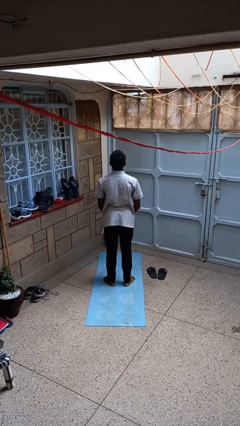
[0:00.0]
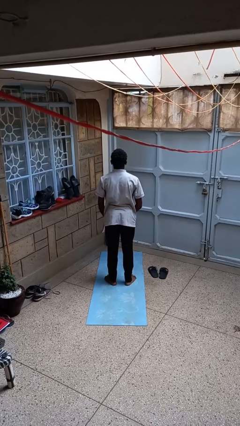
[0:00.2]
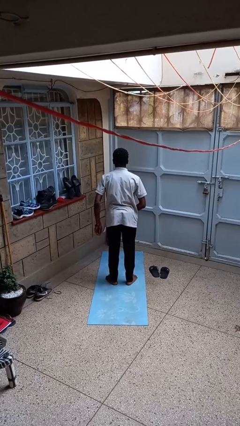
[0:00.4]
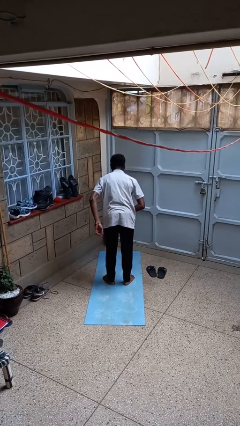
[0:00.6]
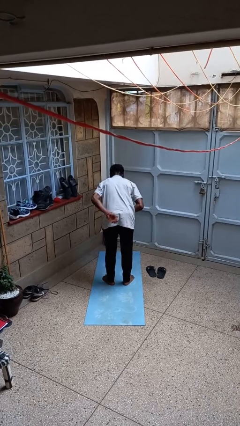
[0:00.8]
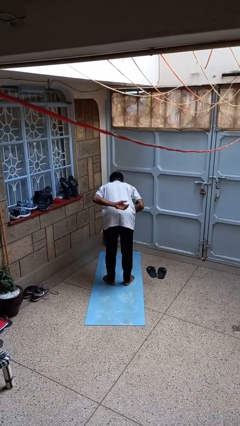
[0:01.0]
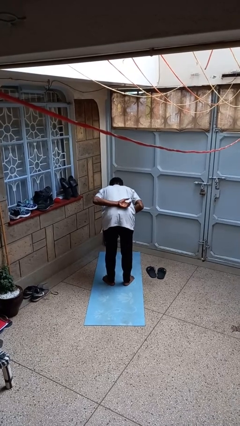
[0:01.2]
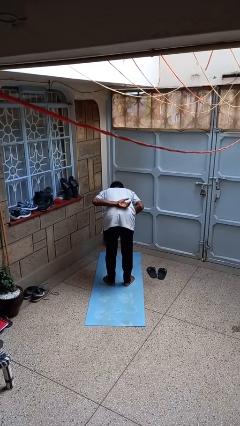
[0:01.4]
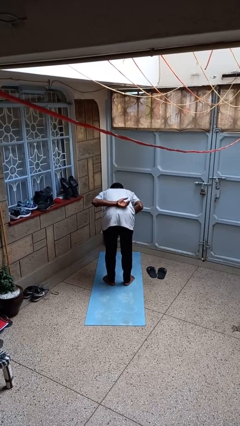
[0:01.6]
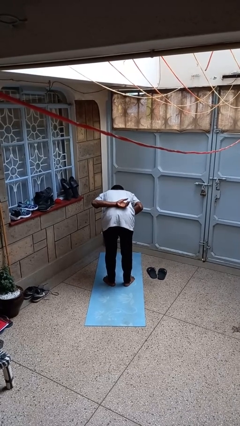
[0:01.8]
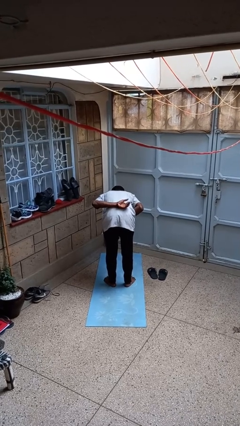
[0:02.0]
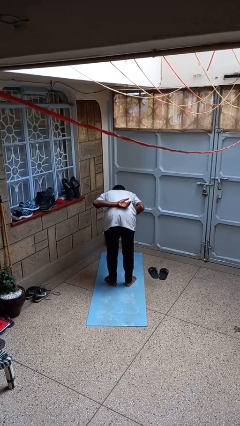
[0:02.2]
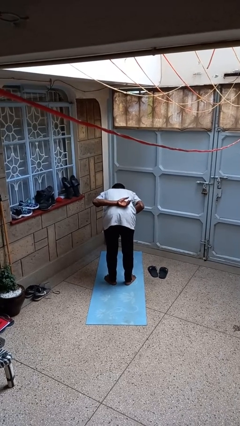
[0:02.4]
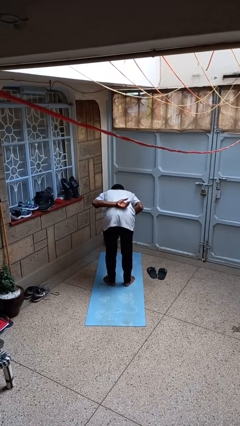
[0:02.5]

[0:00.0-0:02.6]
person bows

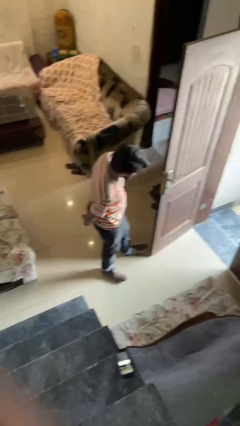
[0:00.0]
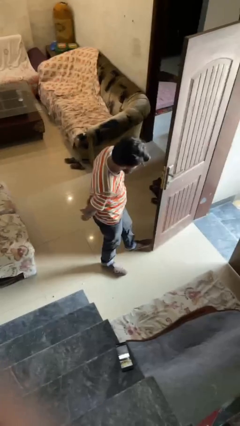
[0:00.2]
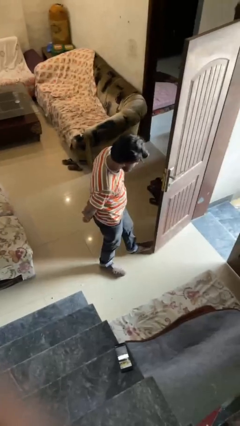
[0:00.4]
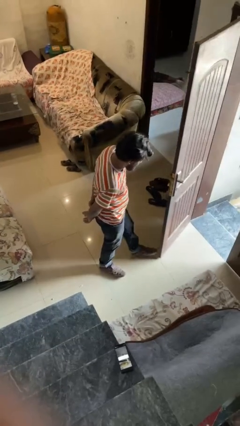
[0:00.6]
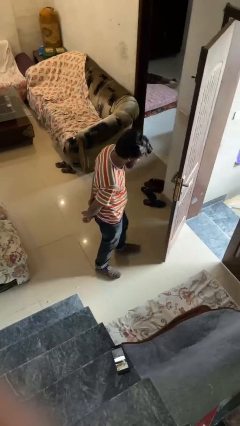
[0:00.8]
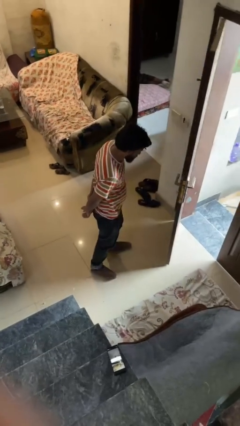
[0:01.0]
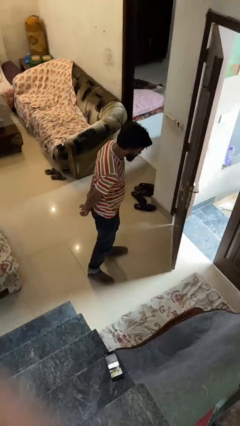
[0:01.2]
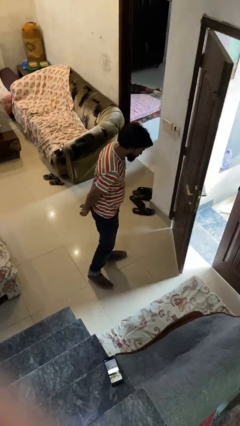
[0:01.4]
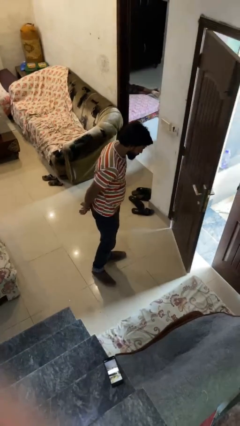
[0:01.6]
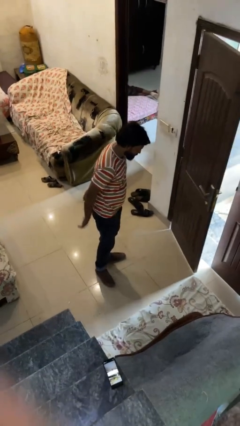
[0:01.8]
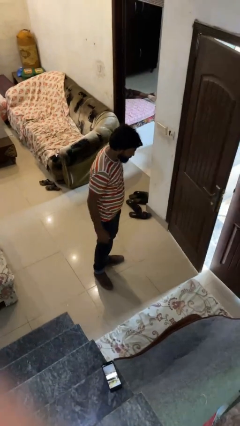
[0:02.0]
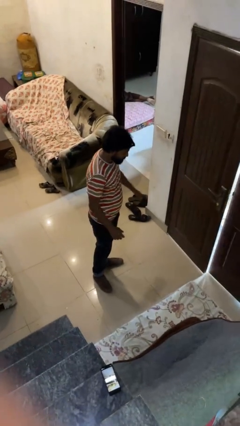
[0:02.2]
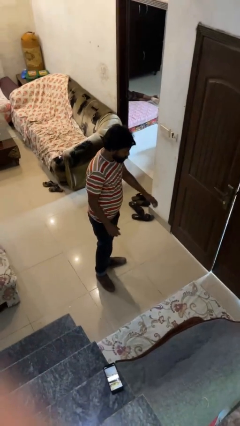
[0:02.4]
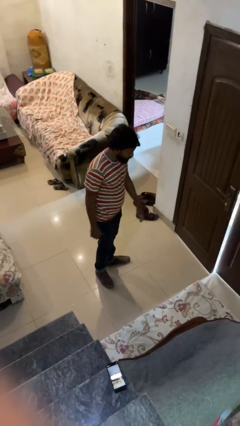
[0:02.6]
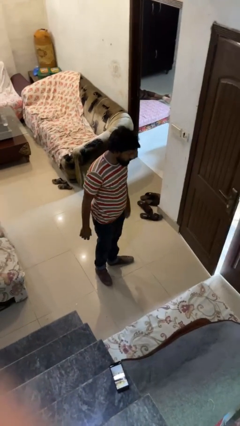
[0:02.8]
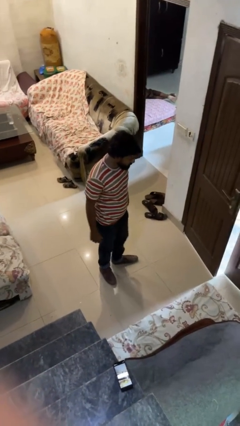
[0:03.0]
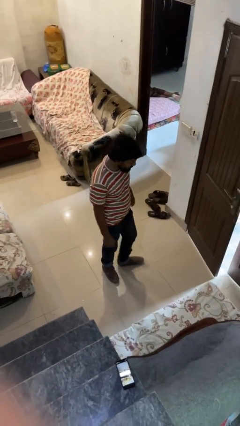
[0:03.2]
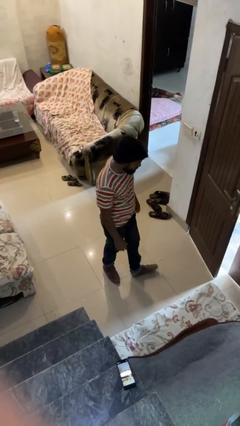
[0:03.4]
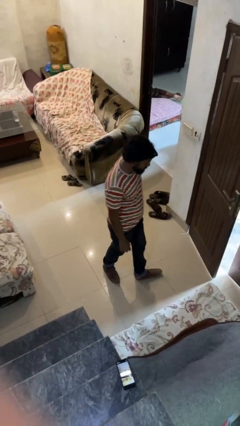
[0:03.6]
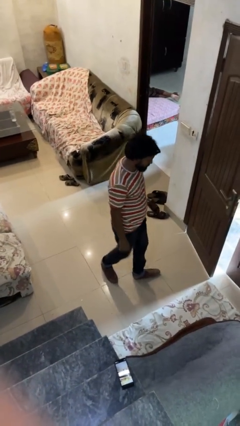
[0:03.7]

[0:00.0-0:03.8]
person closes door with foot

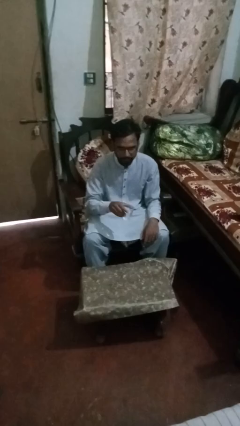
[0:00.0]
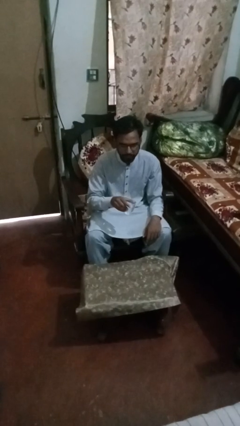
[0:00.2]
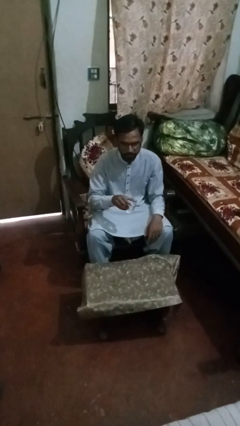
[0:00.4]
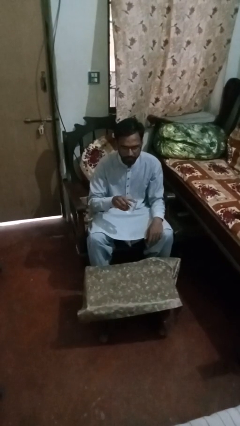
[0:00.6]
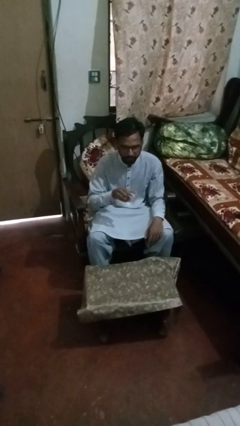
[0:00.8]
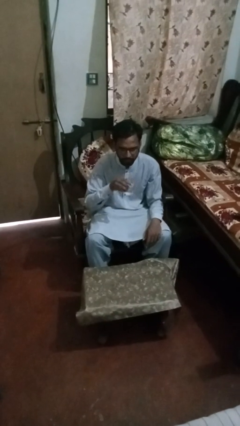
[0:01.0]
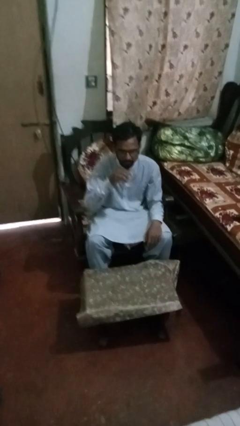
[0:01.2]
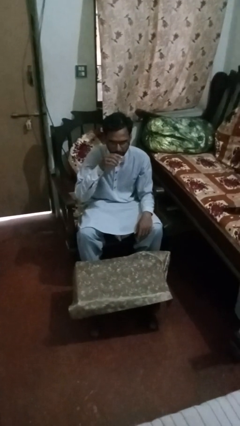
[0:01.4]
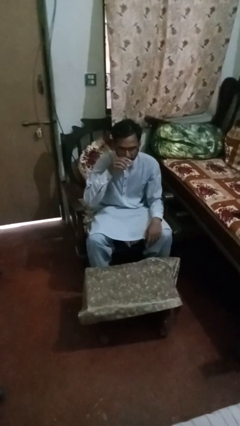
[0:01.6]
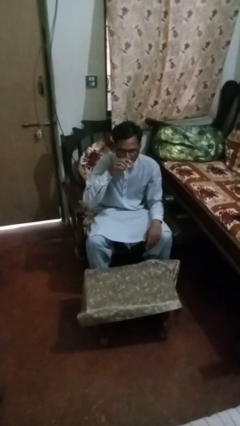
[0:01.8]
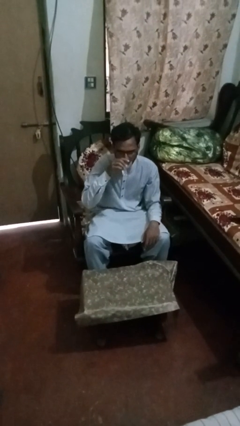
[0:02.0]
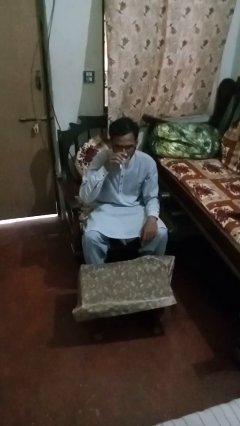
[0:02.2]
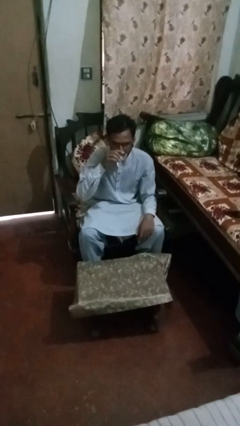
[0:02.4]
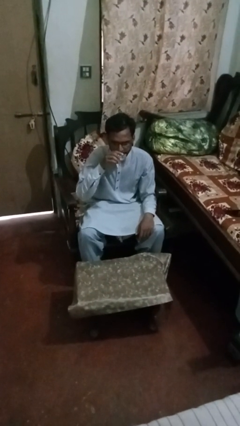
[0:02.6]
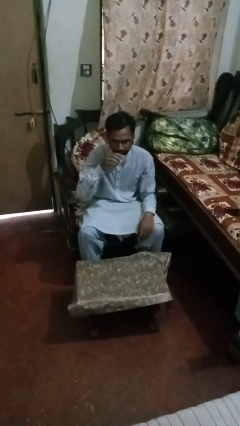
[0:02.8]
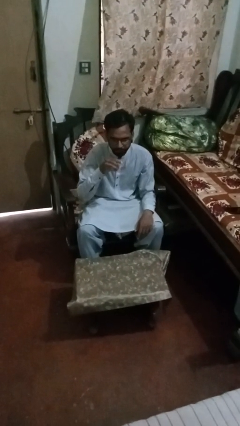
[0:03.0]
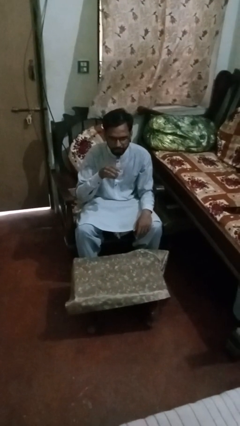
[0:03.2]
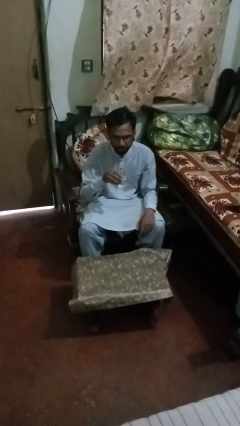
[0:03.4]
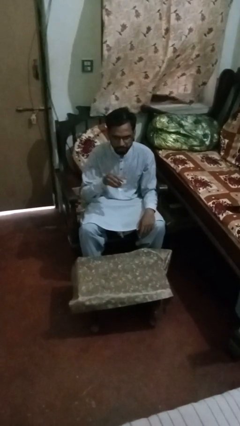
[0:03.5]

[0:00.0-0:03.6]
person drinks from shotglass

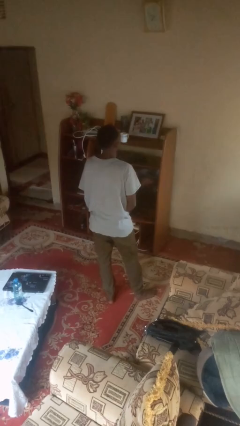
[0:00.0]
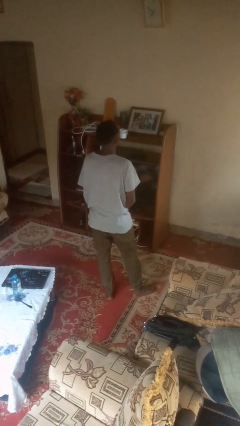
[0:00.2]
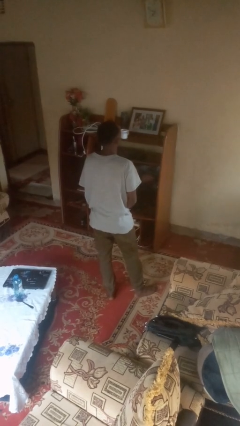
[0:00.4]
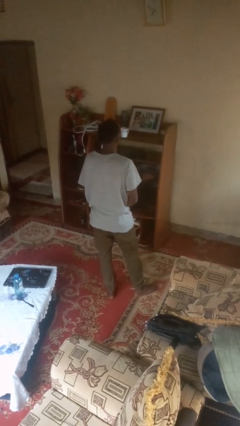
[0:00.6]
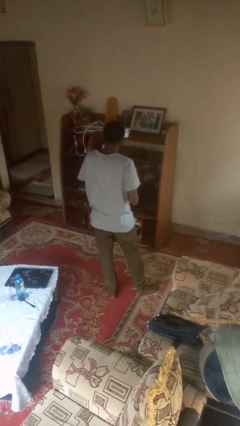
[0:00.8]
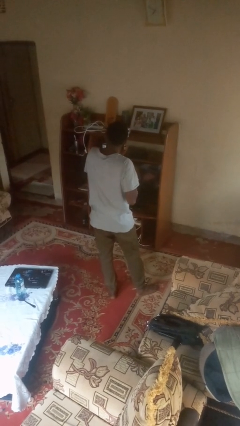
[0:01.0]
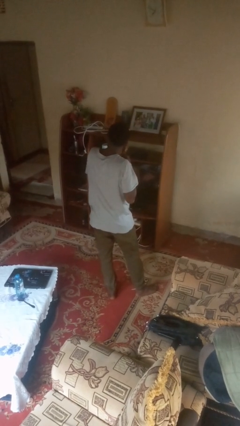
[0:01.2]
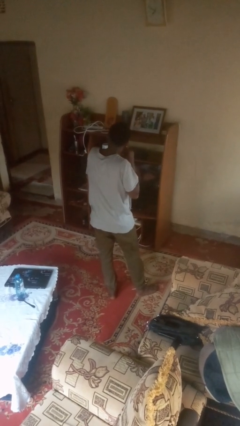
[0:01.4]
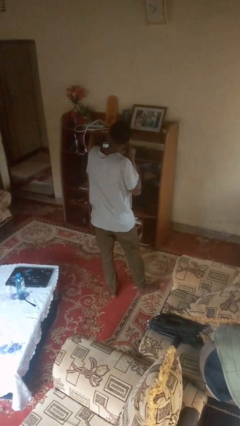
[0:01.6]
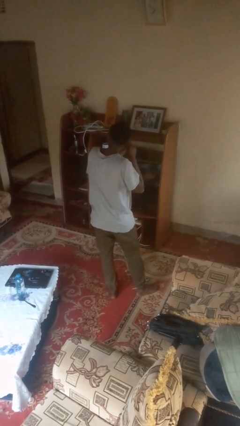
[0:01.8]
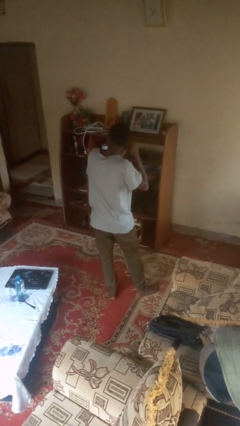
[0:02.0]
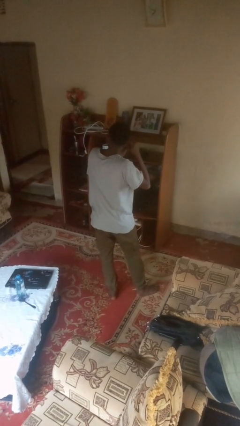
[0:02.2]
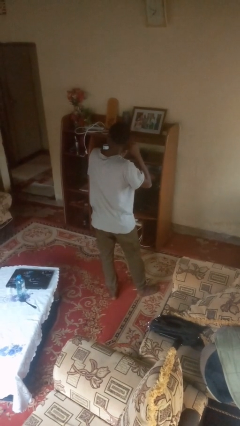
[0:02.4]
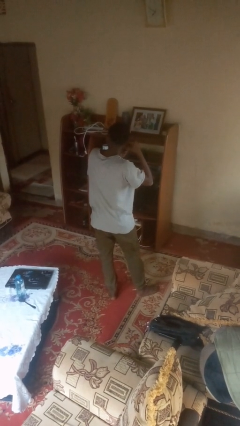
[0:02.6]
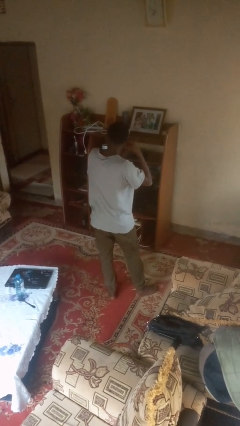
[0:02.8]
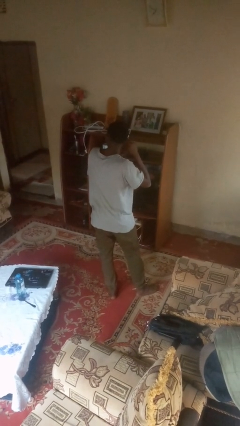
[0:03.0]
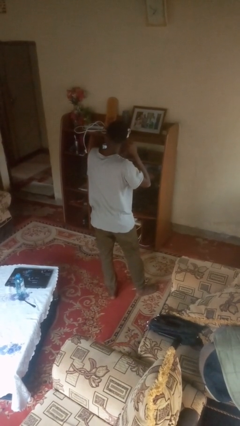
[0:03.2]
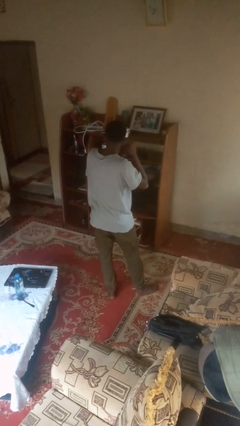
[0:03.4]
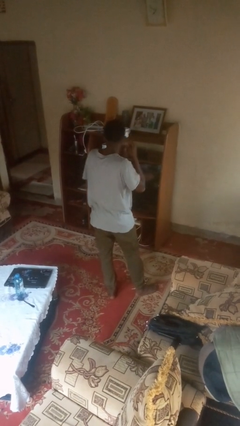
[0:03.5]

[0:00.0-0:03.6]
person puts on earrings

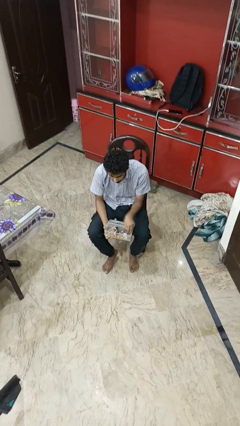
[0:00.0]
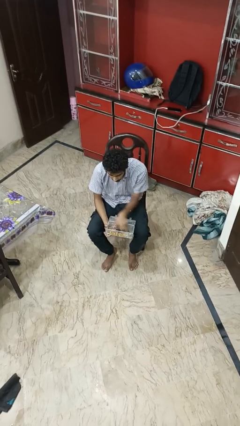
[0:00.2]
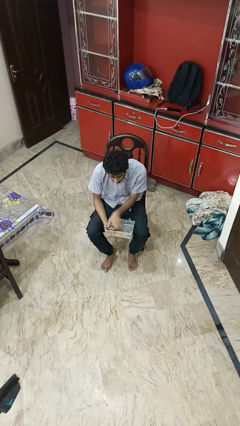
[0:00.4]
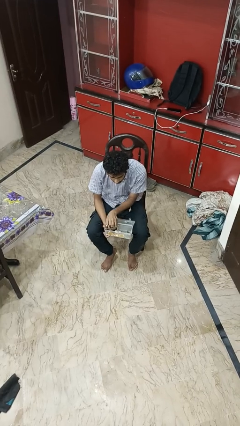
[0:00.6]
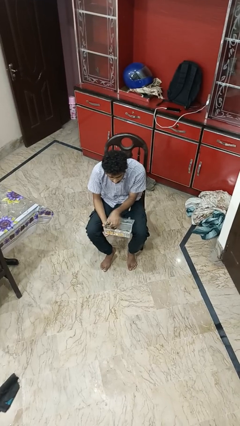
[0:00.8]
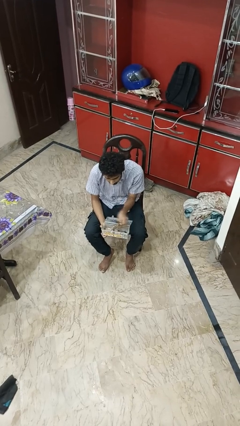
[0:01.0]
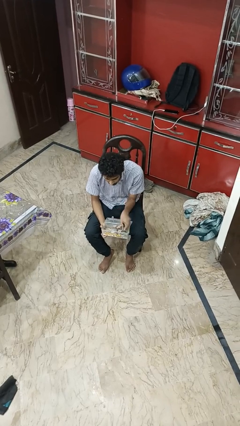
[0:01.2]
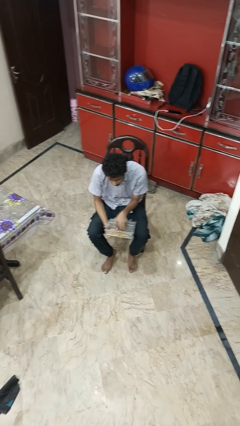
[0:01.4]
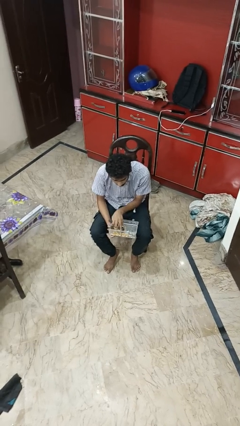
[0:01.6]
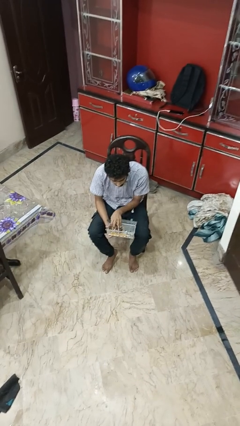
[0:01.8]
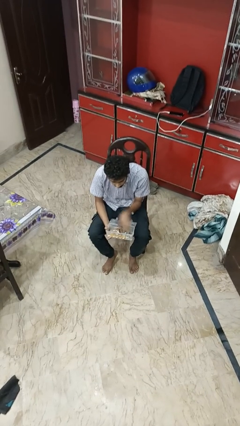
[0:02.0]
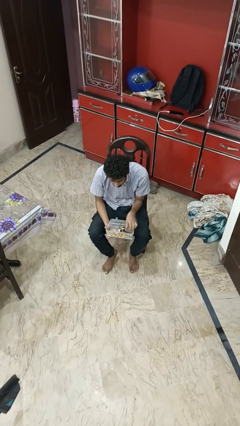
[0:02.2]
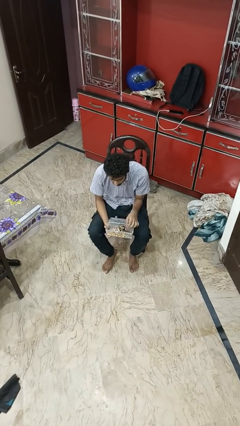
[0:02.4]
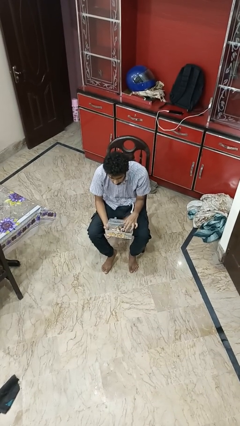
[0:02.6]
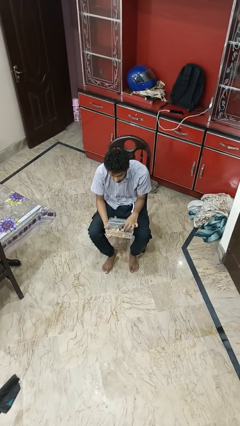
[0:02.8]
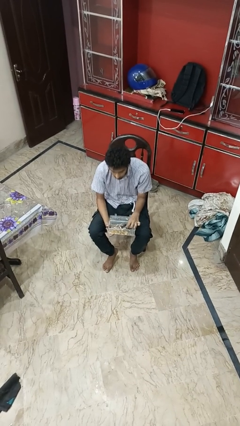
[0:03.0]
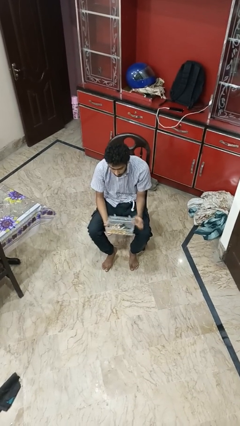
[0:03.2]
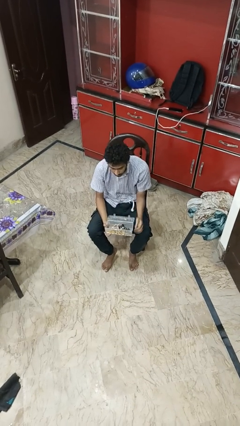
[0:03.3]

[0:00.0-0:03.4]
person searches jewelry box
